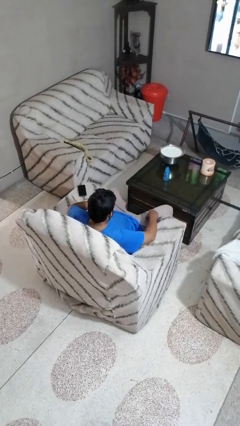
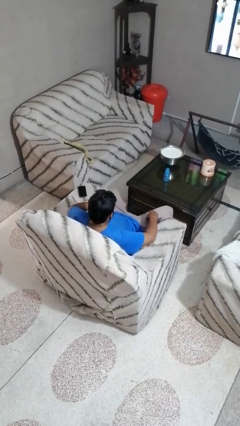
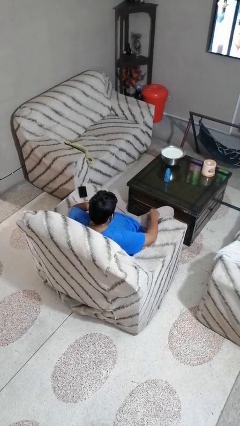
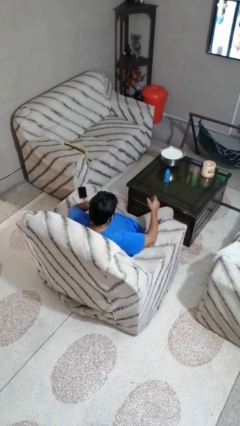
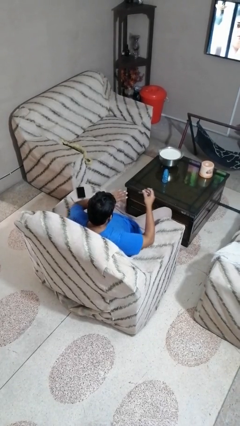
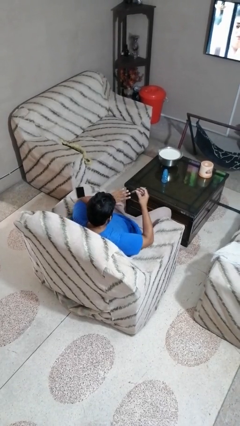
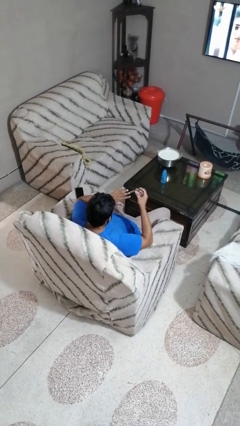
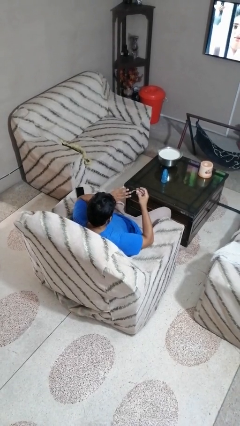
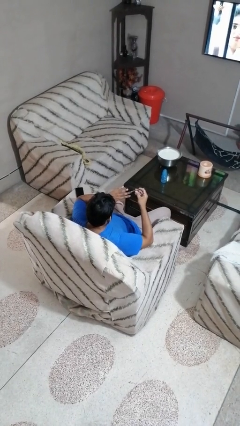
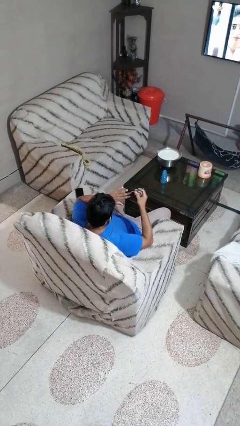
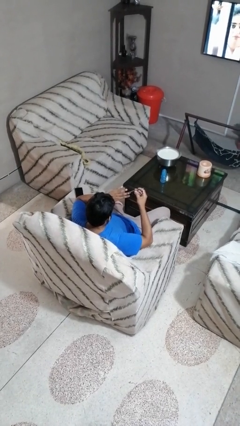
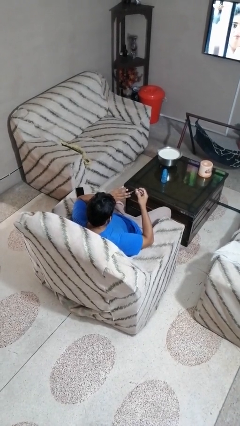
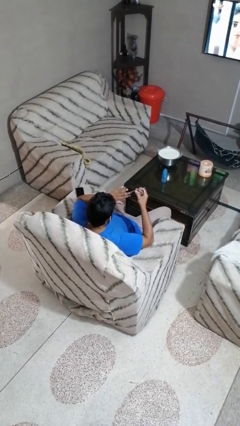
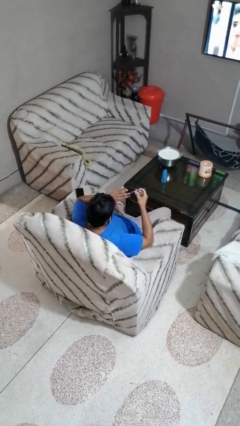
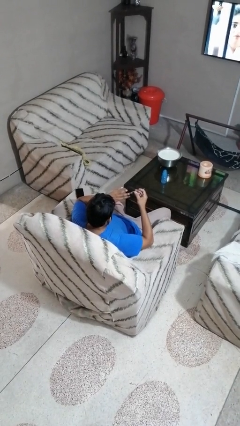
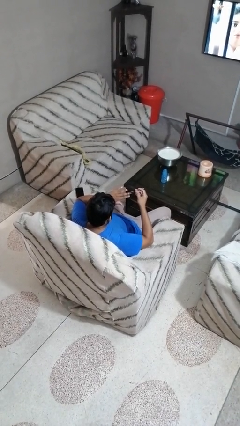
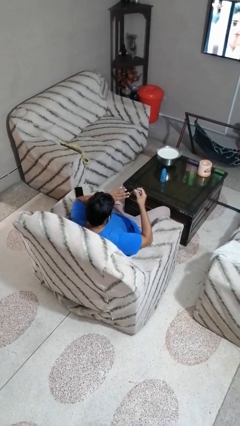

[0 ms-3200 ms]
person clips fingernails

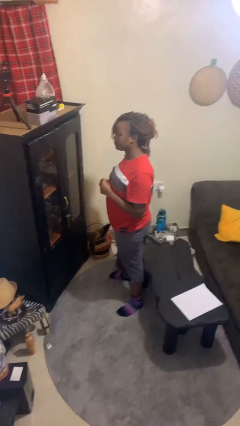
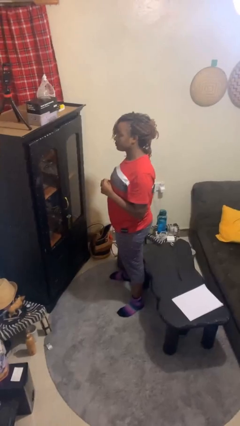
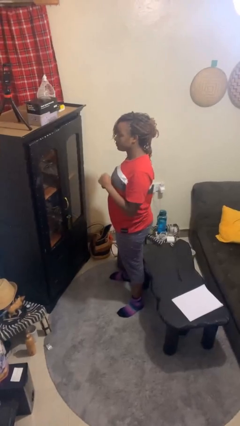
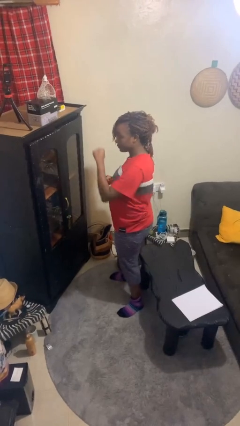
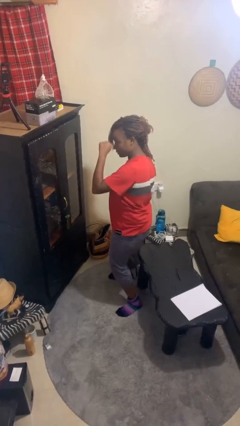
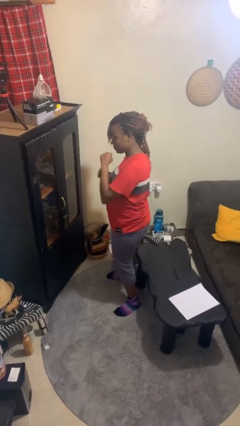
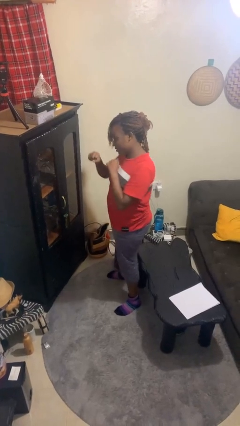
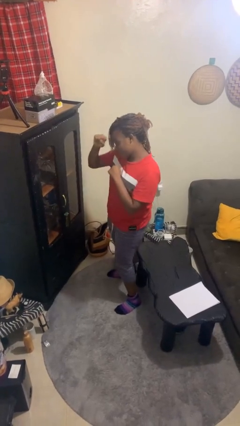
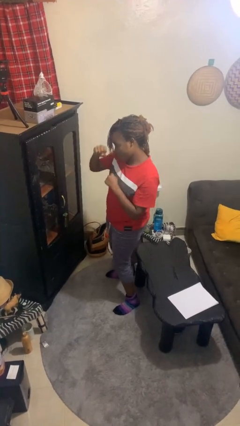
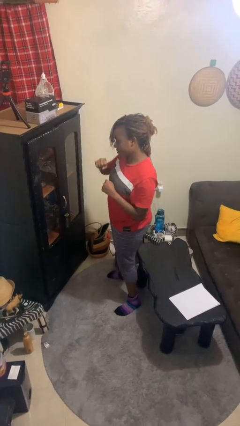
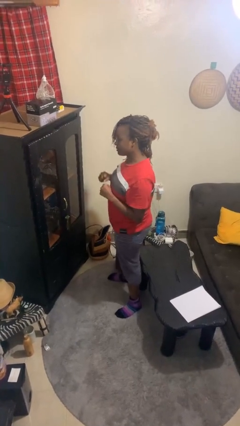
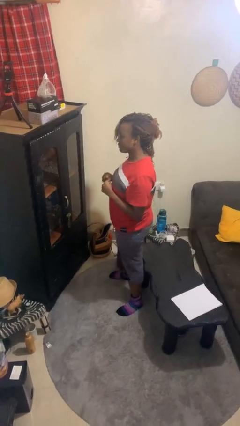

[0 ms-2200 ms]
person punches

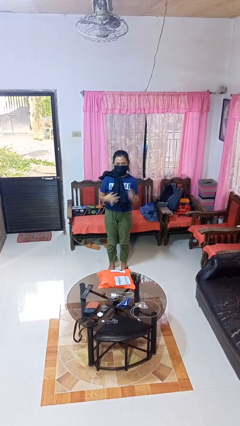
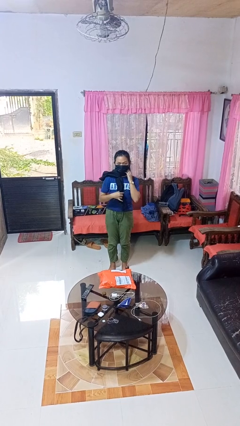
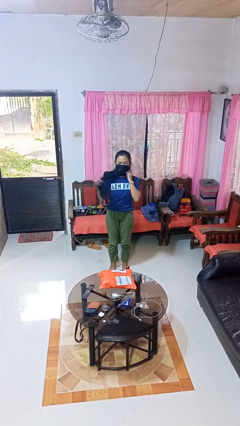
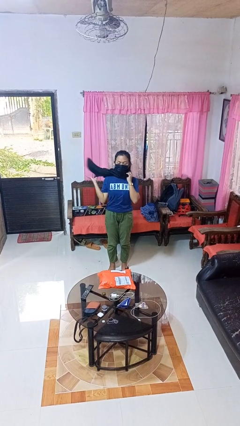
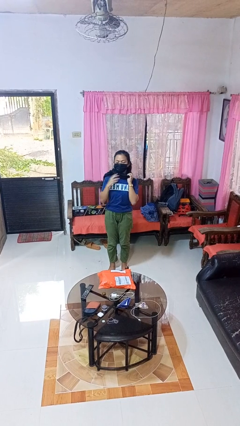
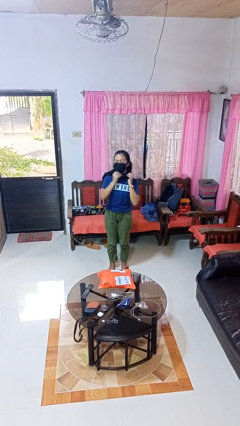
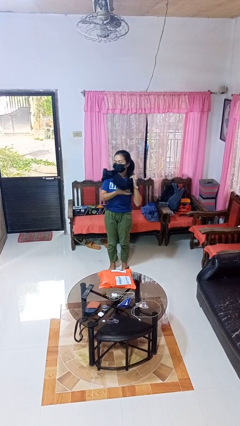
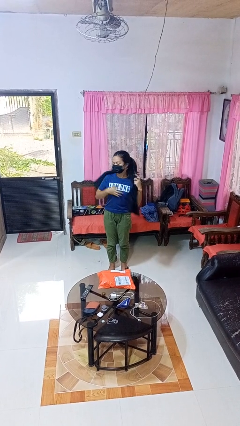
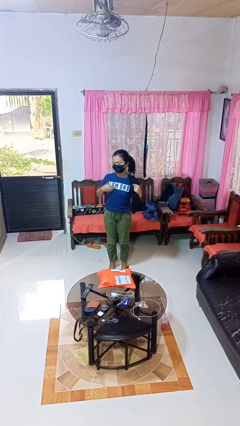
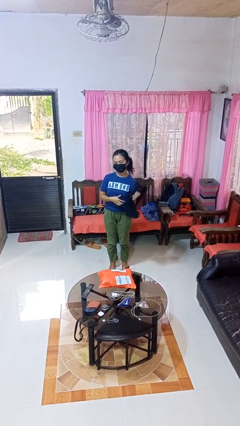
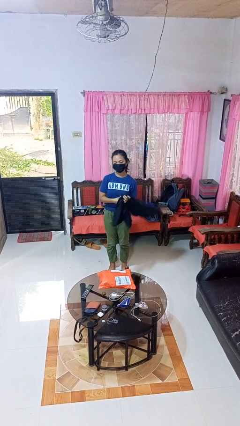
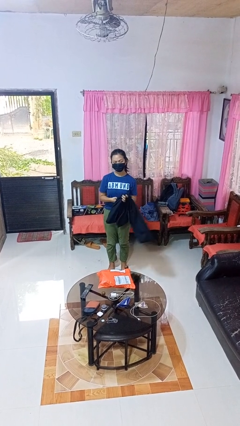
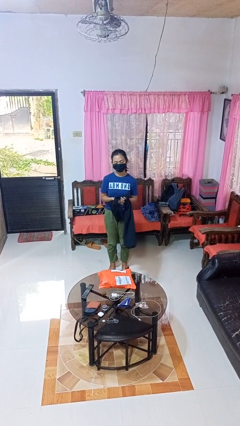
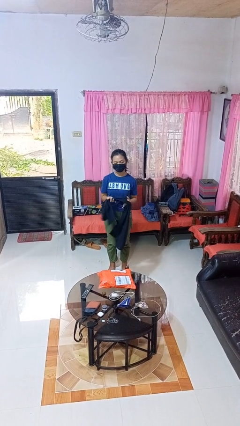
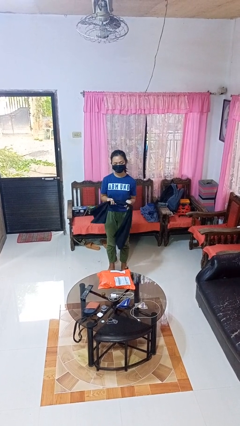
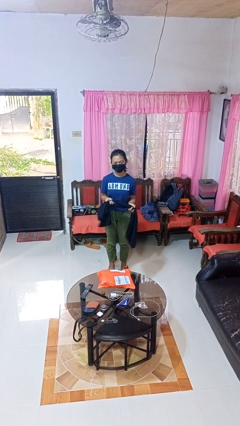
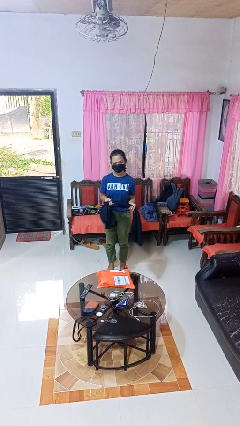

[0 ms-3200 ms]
person takes off scarf

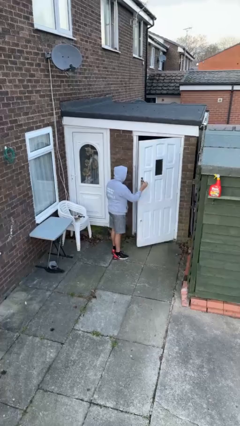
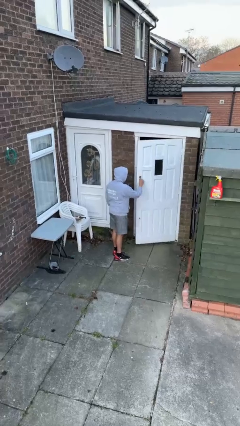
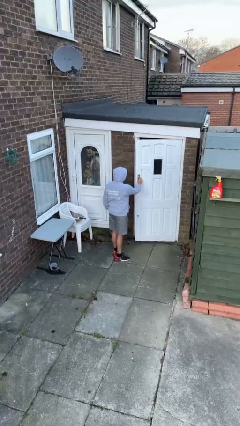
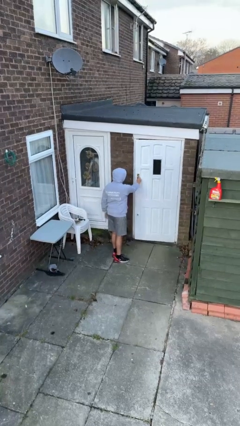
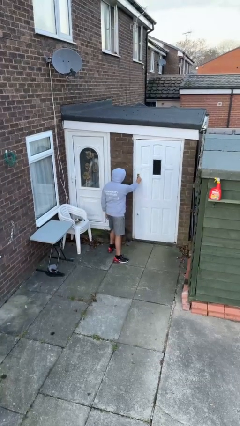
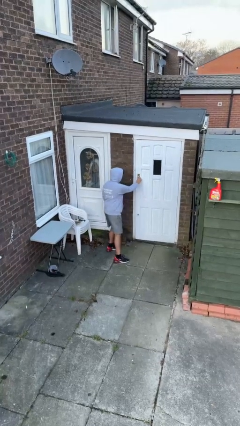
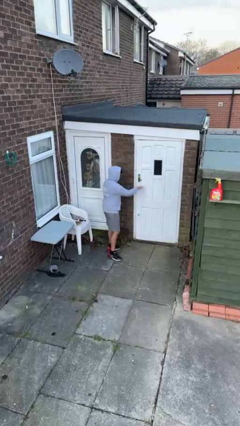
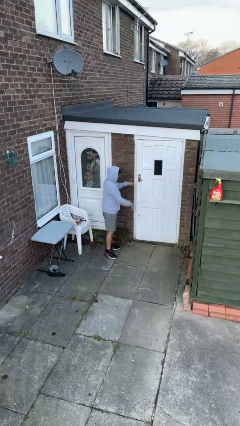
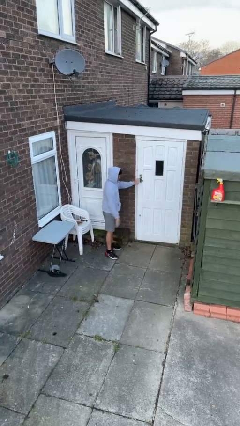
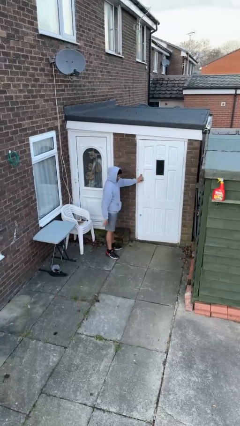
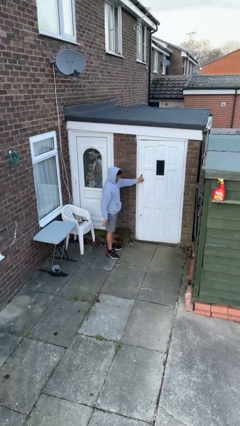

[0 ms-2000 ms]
person closes facility door

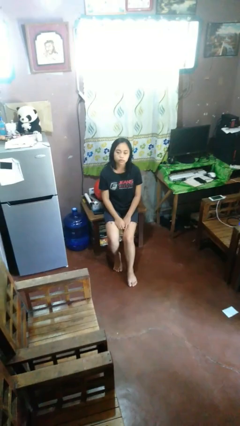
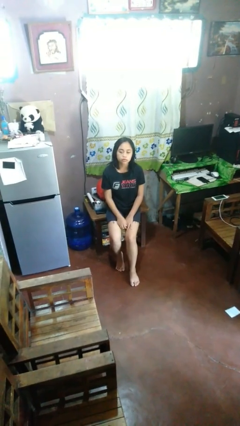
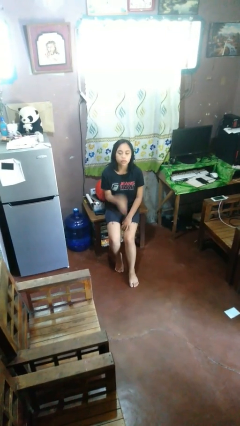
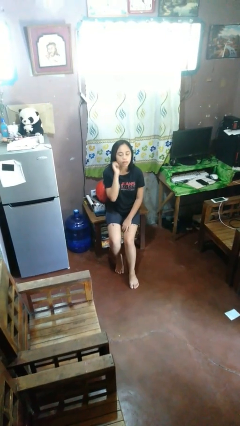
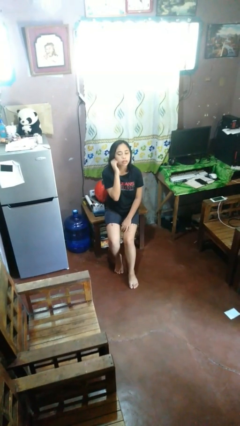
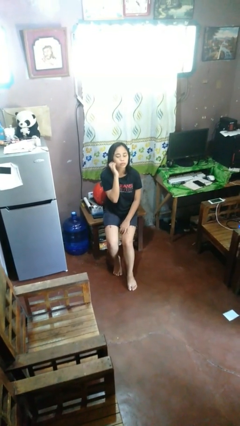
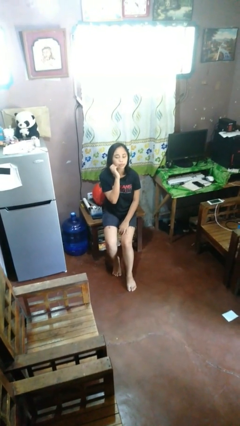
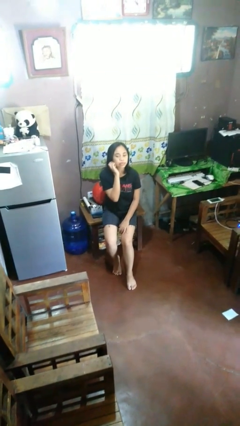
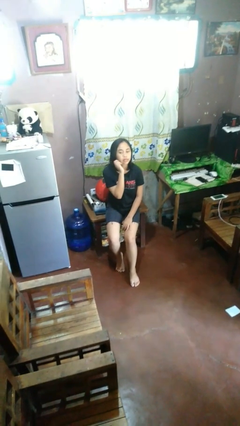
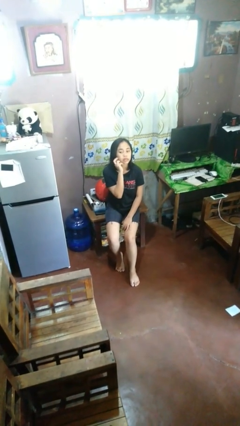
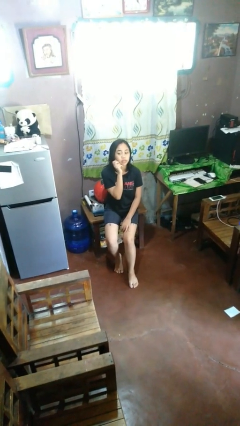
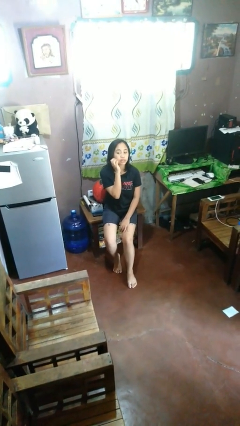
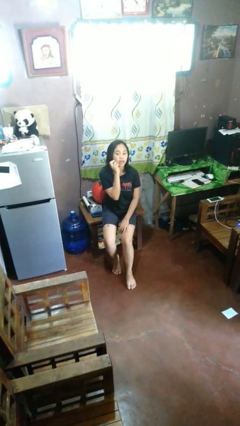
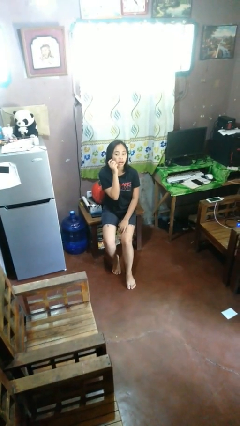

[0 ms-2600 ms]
person scratches face

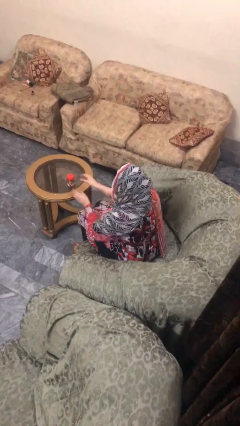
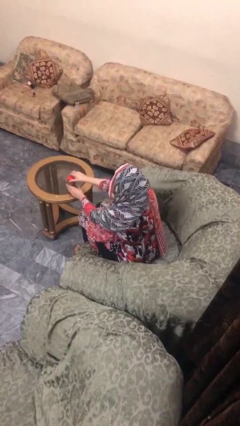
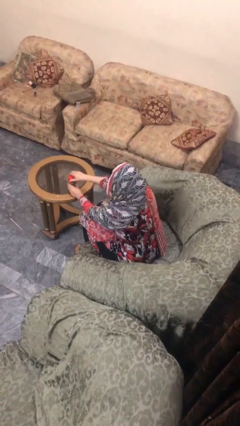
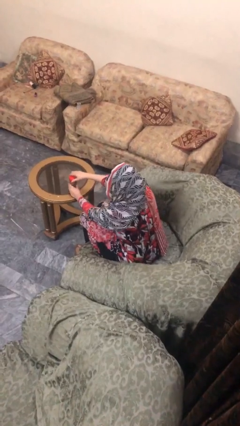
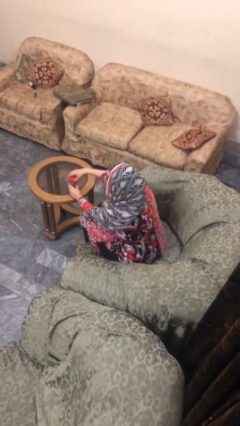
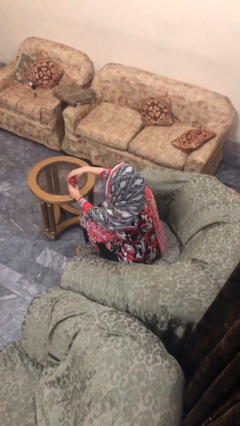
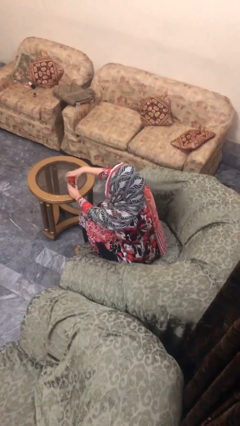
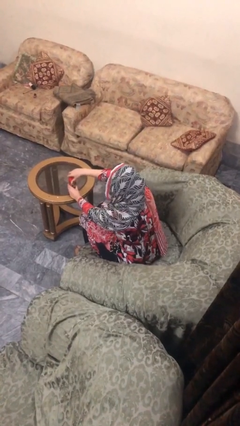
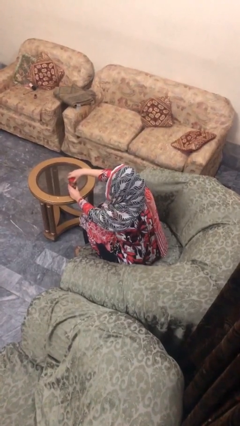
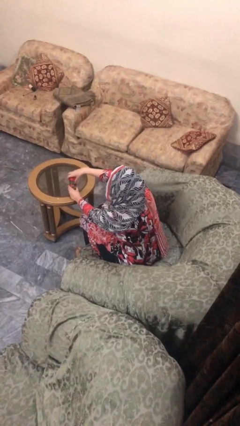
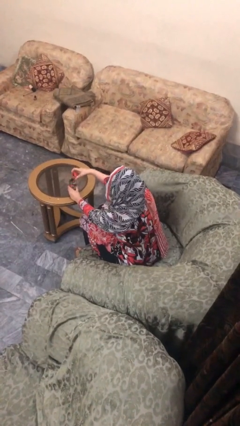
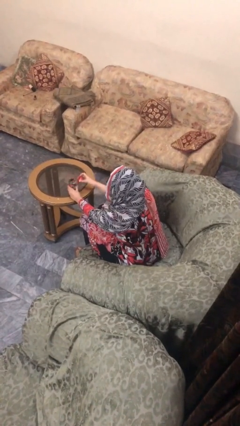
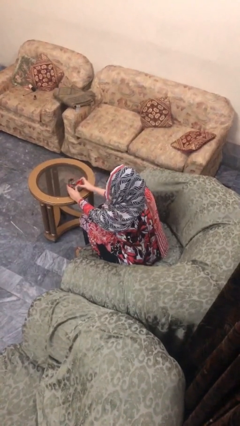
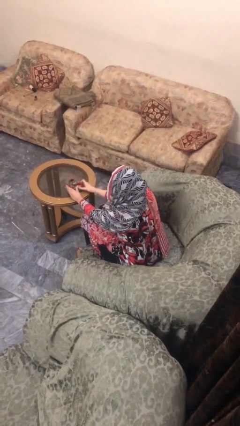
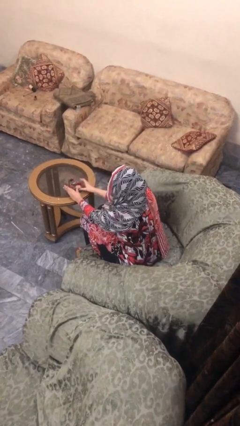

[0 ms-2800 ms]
person opens jar

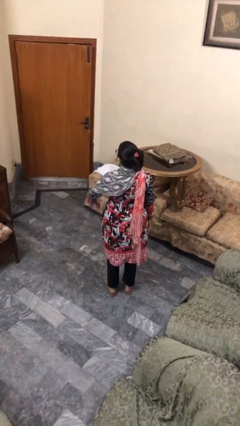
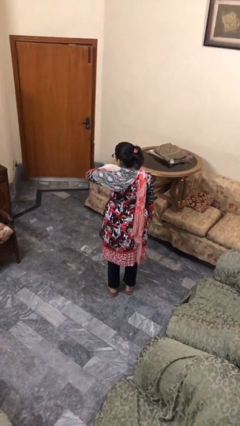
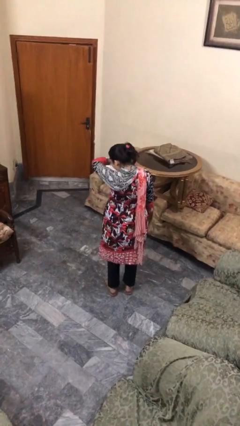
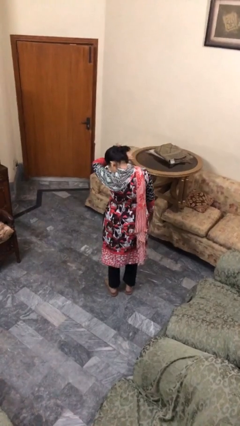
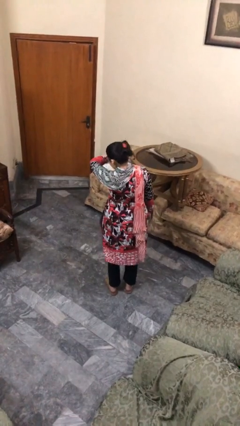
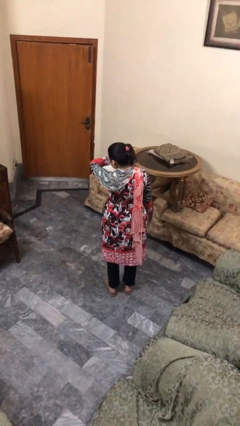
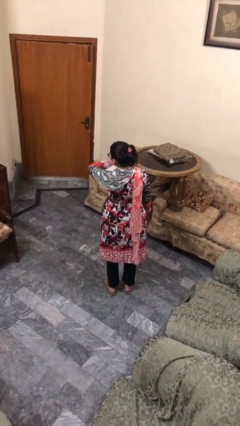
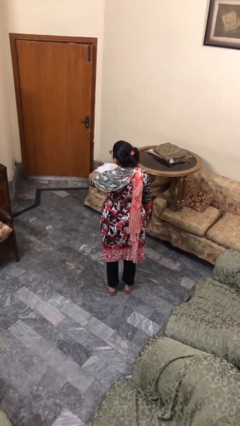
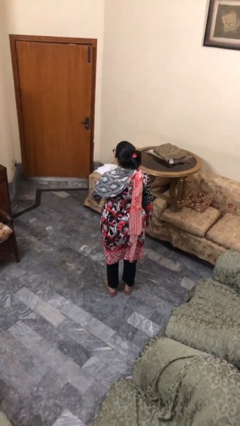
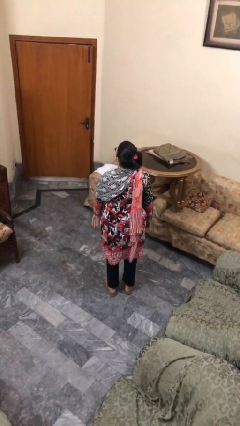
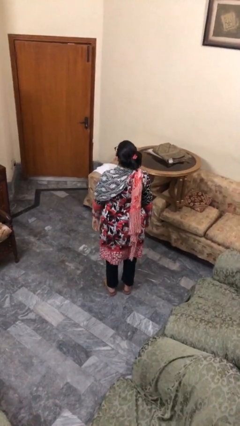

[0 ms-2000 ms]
person sneezes into arm
